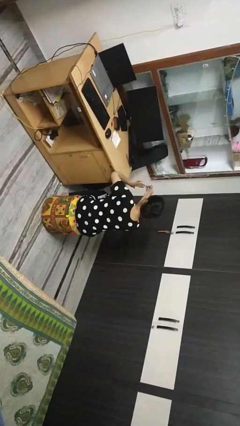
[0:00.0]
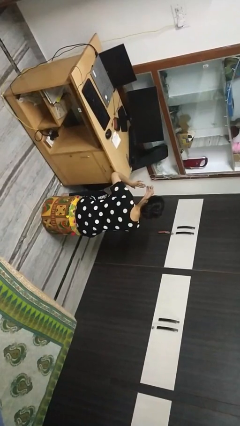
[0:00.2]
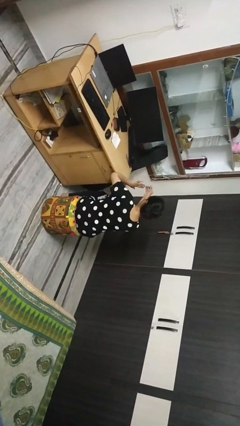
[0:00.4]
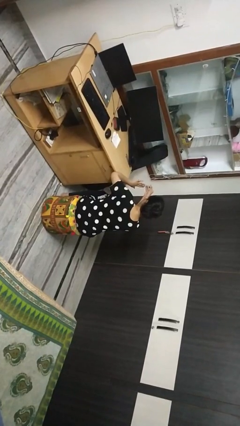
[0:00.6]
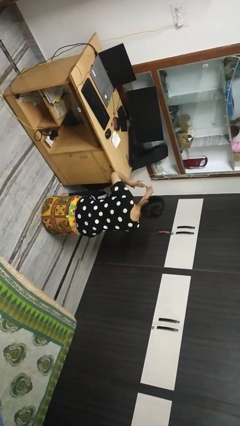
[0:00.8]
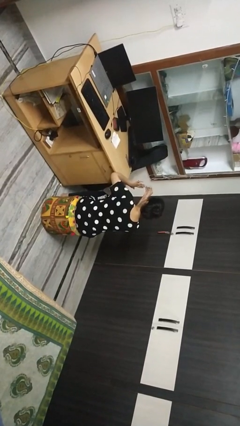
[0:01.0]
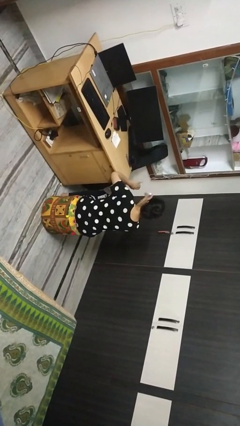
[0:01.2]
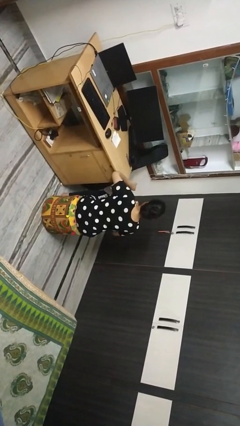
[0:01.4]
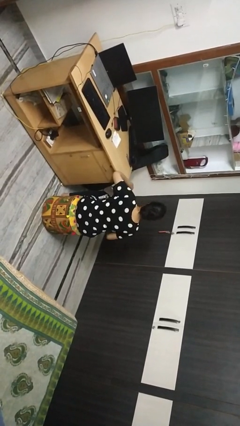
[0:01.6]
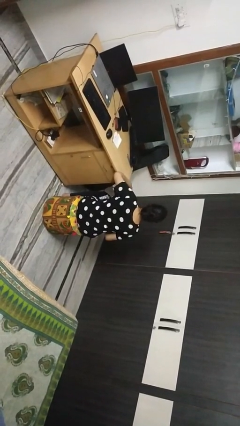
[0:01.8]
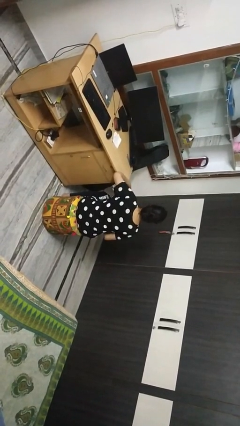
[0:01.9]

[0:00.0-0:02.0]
person clips fingernails

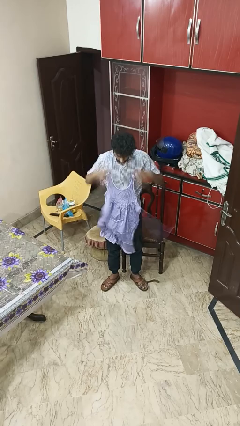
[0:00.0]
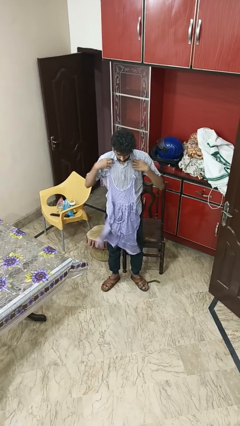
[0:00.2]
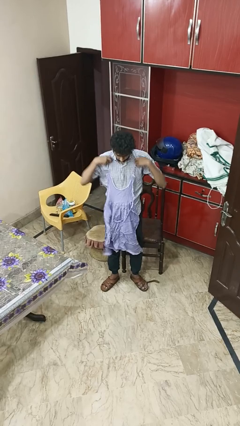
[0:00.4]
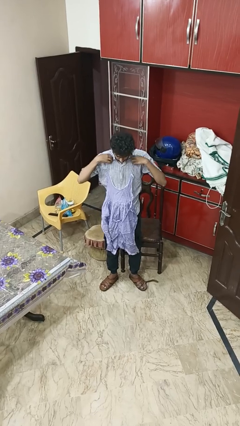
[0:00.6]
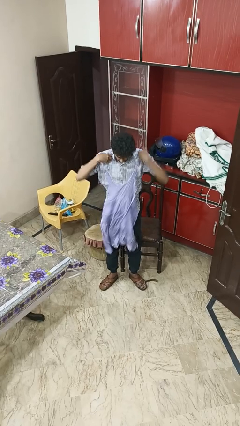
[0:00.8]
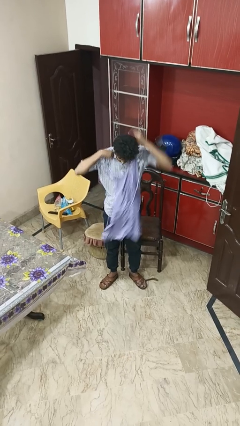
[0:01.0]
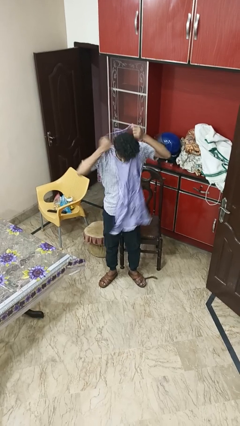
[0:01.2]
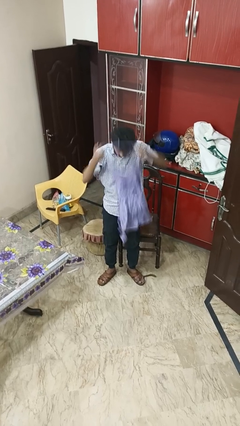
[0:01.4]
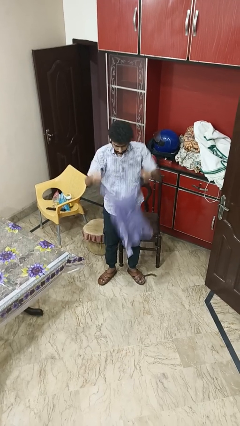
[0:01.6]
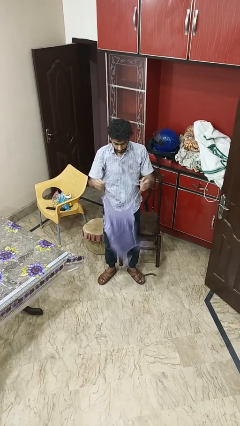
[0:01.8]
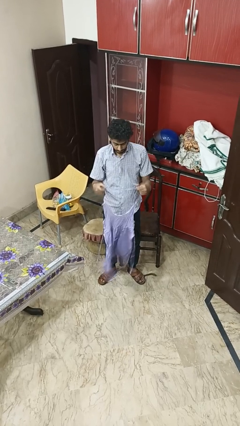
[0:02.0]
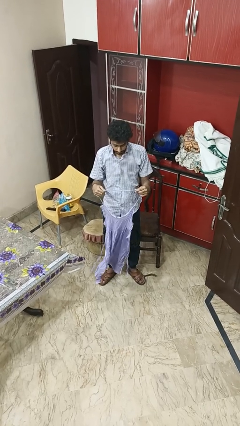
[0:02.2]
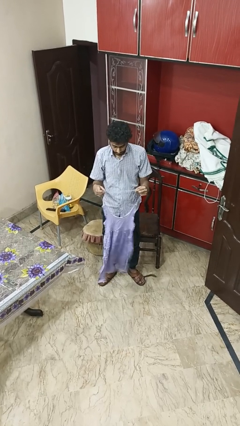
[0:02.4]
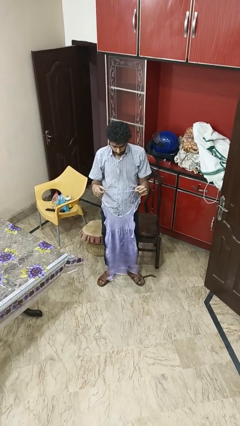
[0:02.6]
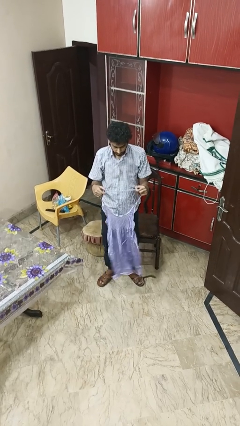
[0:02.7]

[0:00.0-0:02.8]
person takes off apron

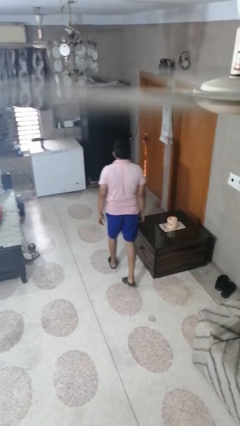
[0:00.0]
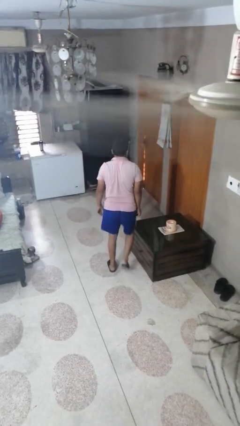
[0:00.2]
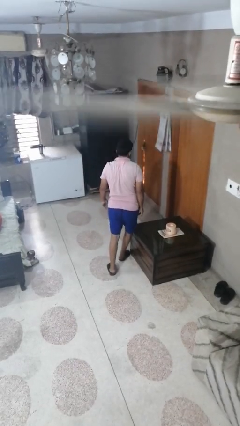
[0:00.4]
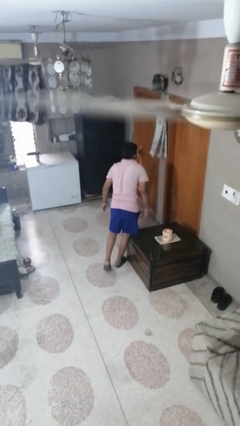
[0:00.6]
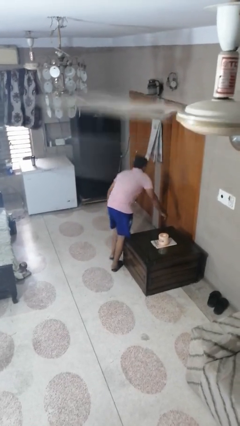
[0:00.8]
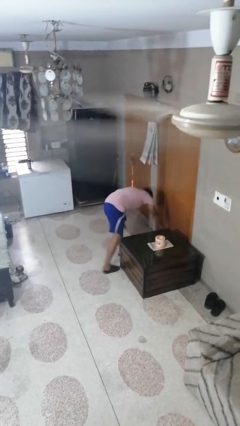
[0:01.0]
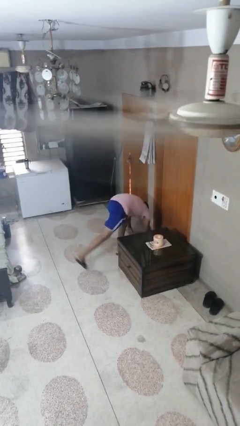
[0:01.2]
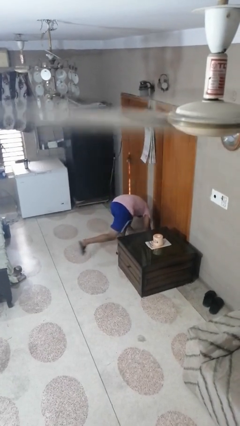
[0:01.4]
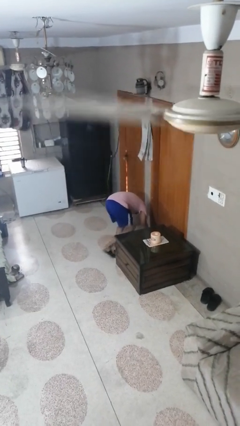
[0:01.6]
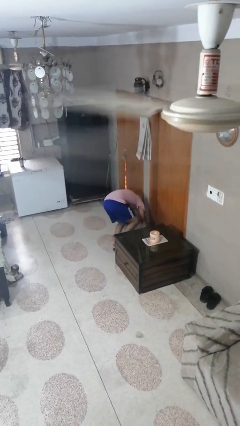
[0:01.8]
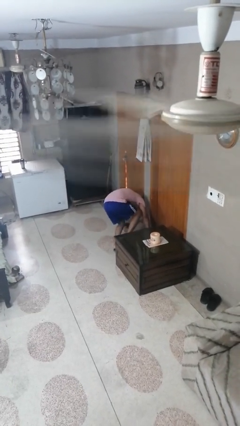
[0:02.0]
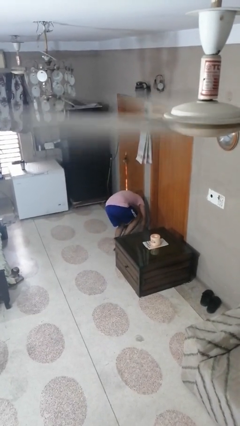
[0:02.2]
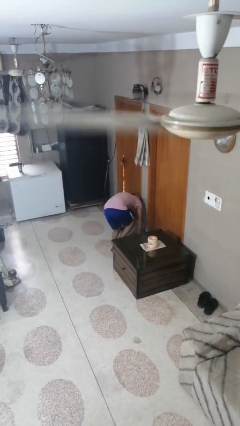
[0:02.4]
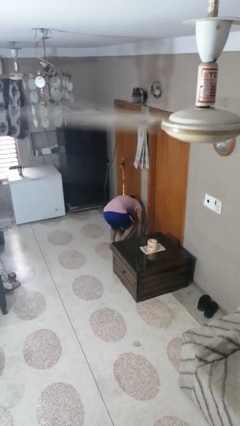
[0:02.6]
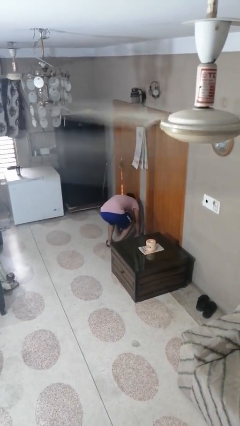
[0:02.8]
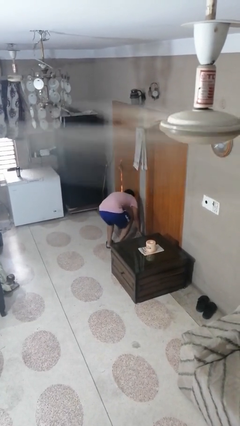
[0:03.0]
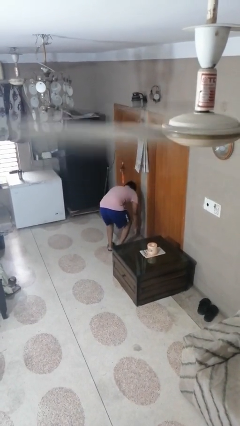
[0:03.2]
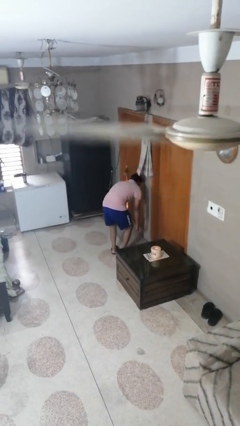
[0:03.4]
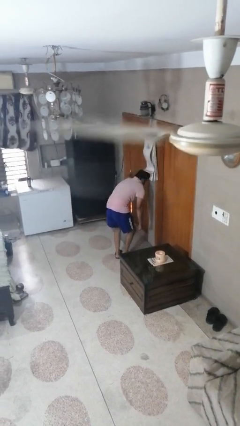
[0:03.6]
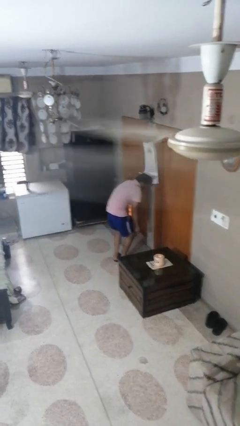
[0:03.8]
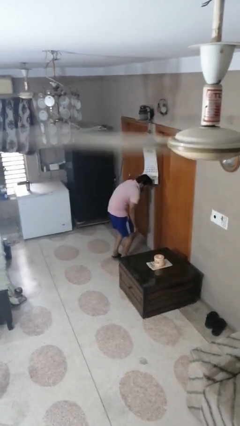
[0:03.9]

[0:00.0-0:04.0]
person bumps into table

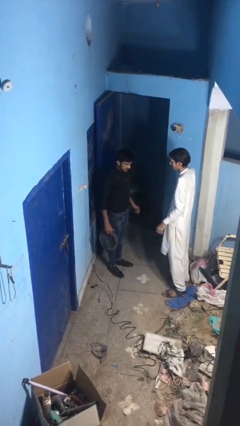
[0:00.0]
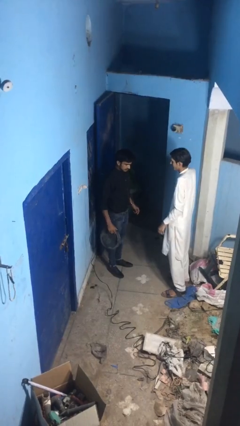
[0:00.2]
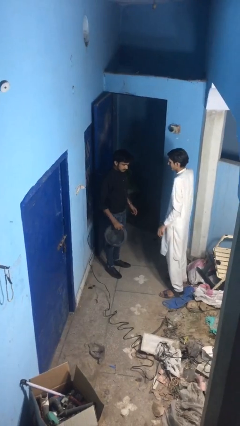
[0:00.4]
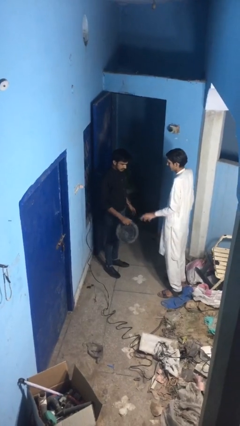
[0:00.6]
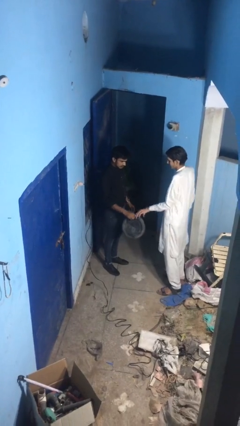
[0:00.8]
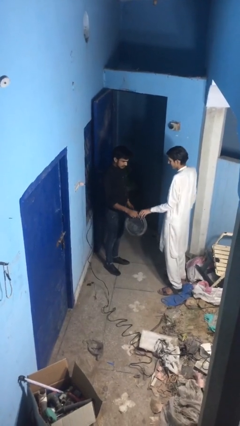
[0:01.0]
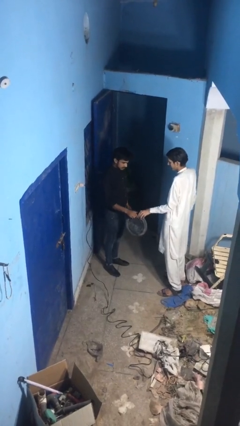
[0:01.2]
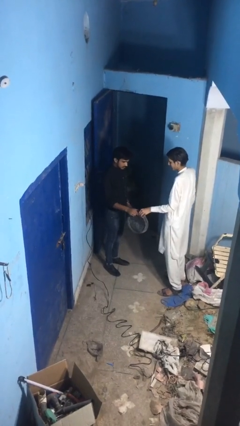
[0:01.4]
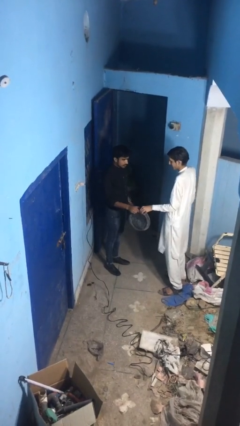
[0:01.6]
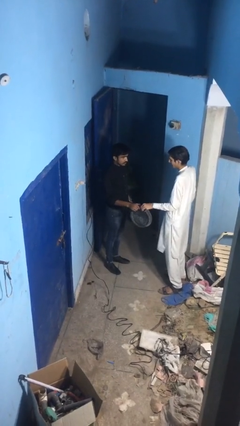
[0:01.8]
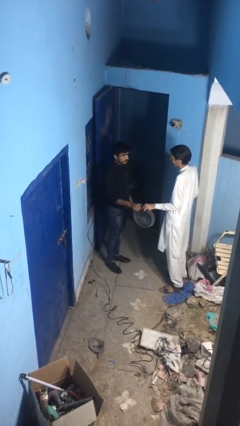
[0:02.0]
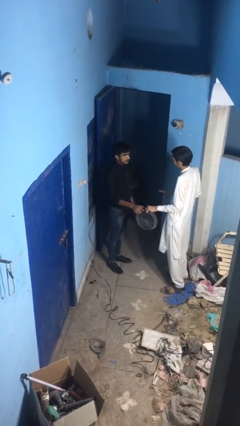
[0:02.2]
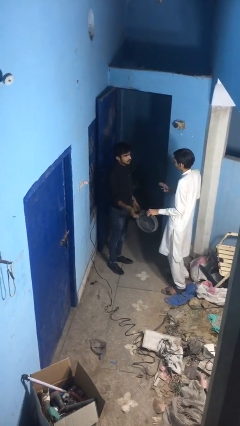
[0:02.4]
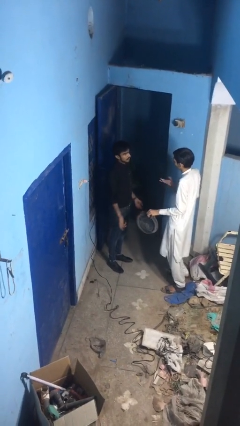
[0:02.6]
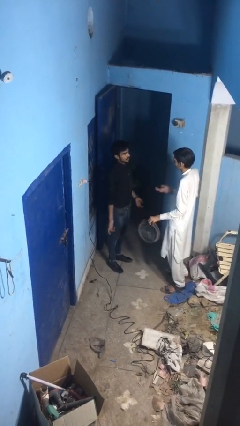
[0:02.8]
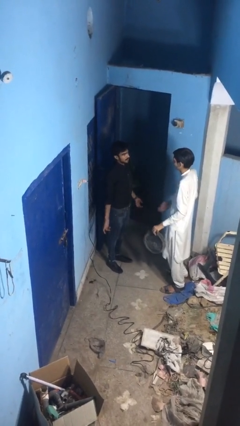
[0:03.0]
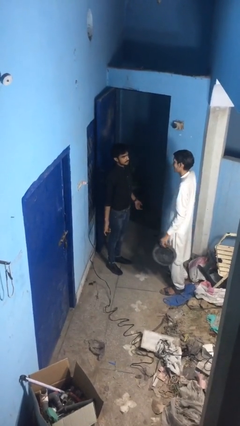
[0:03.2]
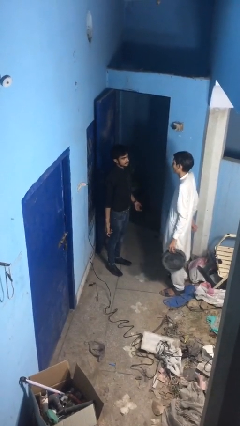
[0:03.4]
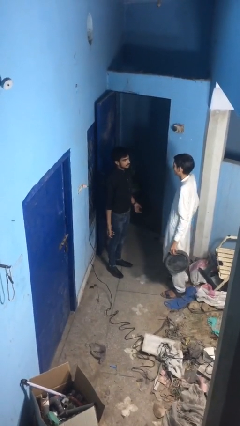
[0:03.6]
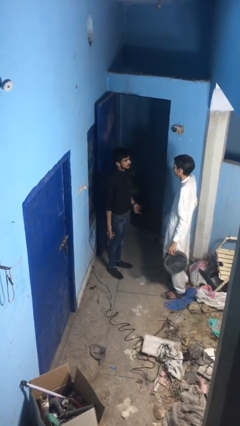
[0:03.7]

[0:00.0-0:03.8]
person transfers object to person

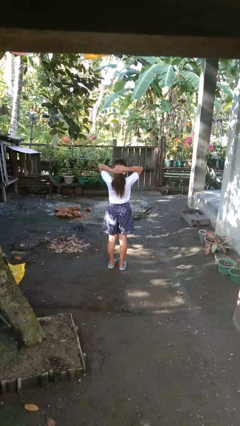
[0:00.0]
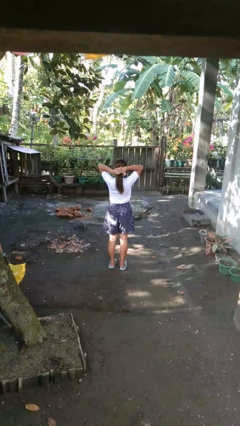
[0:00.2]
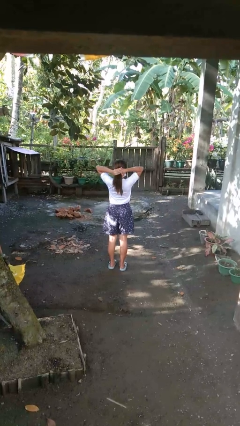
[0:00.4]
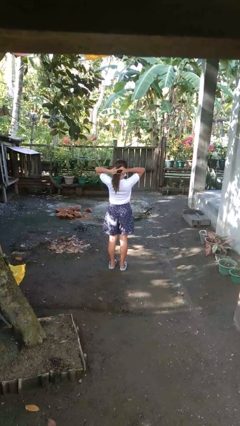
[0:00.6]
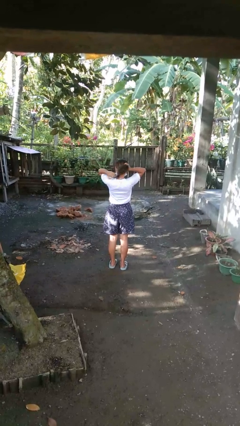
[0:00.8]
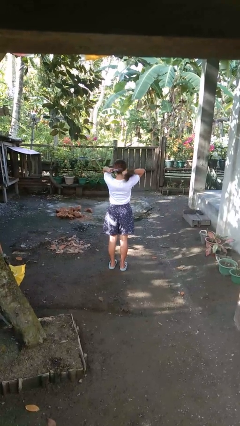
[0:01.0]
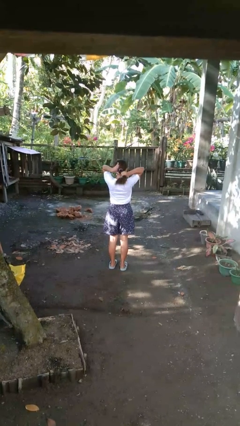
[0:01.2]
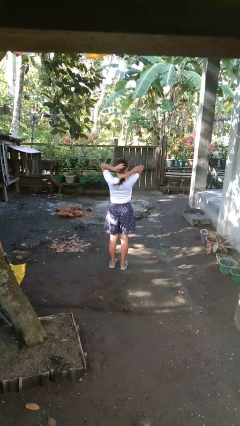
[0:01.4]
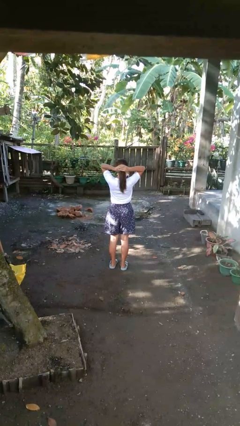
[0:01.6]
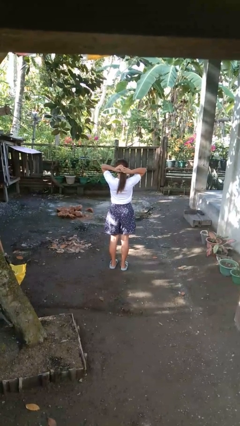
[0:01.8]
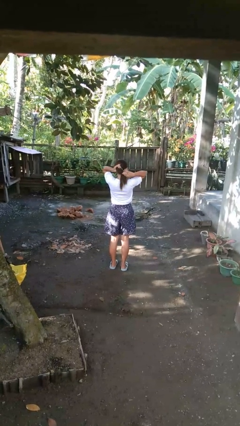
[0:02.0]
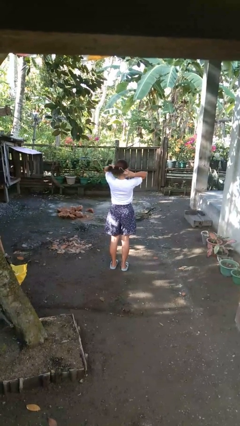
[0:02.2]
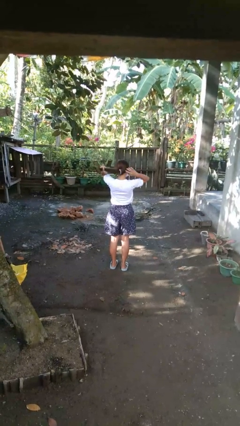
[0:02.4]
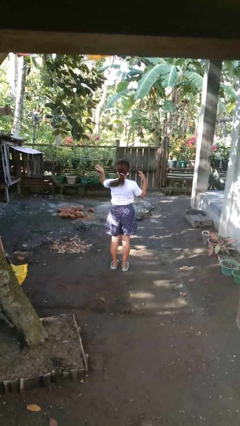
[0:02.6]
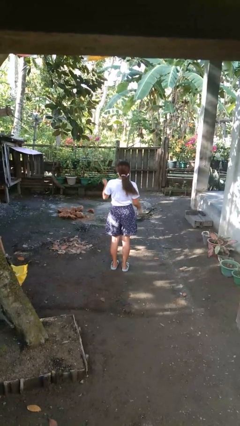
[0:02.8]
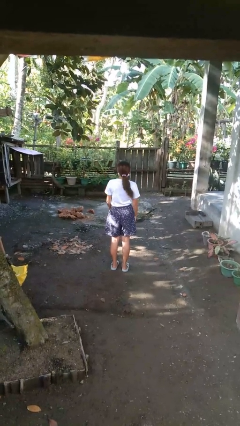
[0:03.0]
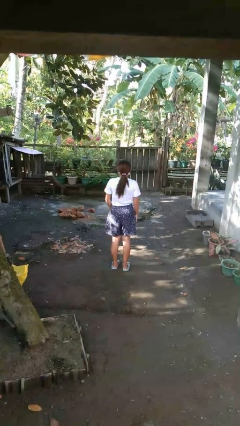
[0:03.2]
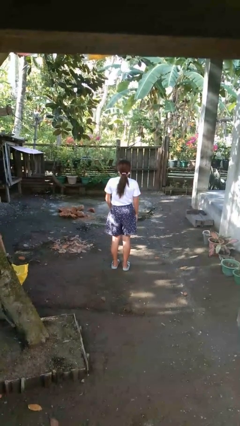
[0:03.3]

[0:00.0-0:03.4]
person puts hair in ponytail

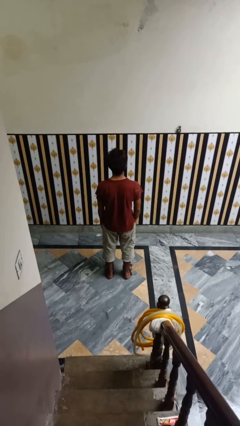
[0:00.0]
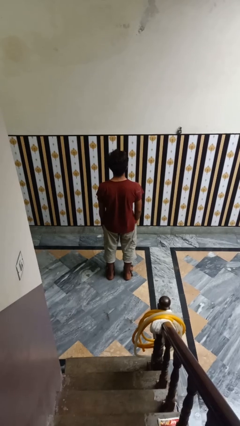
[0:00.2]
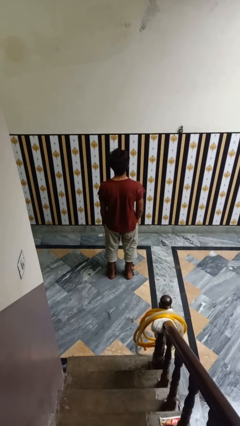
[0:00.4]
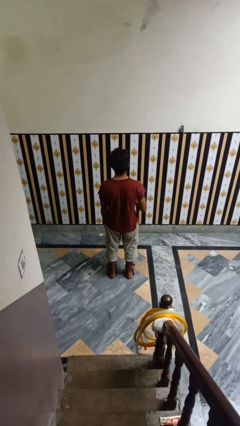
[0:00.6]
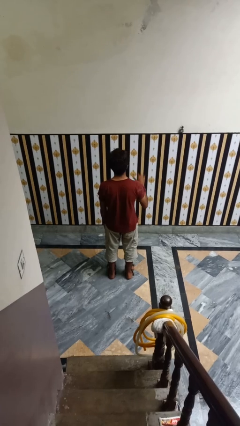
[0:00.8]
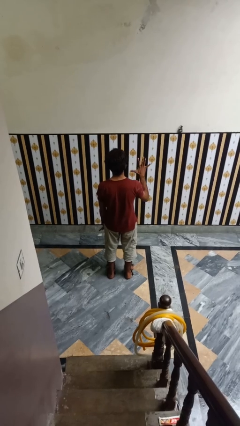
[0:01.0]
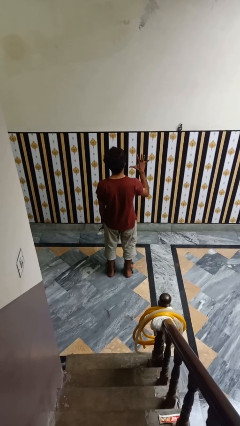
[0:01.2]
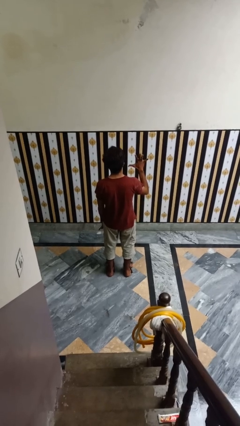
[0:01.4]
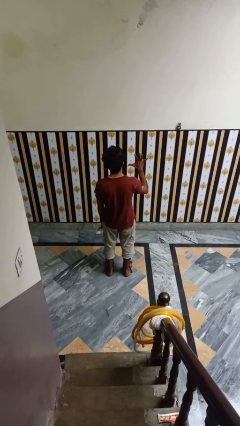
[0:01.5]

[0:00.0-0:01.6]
person gestures number five

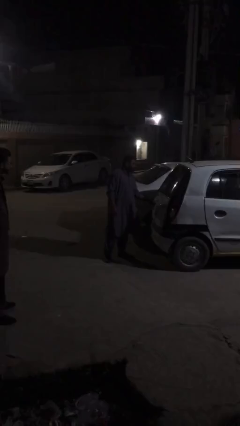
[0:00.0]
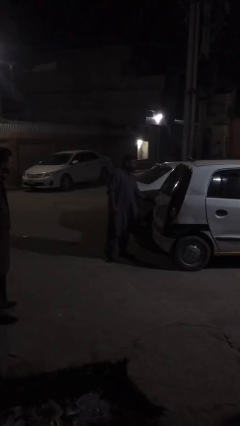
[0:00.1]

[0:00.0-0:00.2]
person opens car trunk
